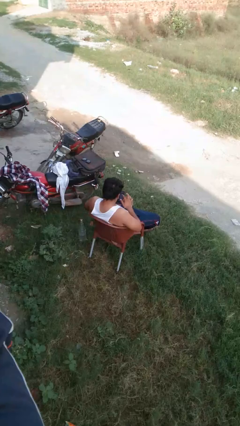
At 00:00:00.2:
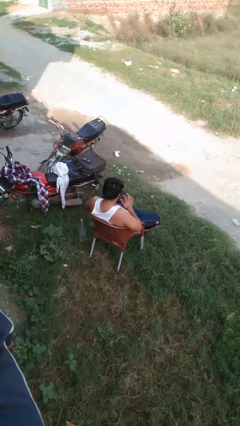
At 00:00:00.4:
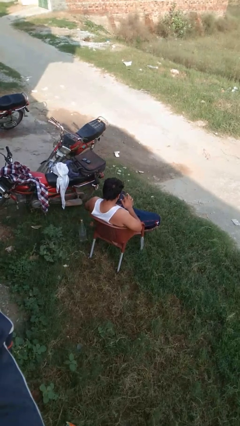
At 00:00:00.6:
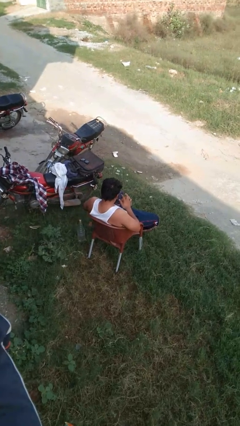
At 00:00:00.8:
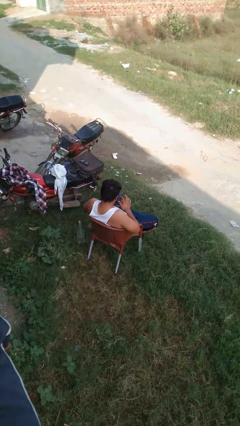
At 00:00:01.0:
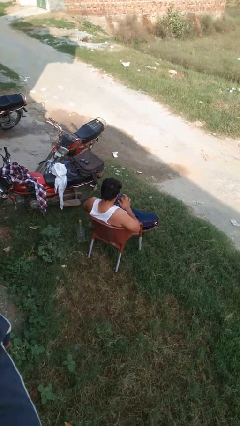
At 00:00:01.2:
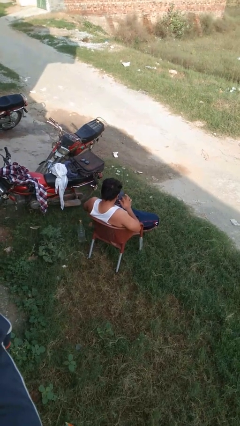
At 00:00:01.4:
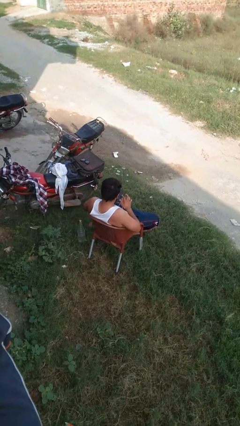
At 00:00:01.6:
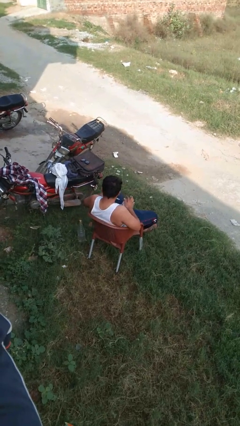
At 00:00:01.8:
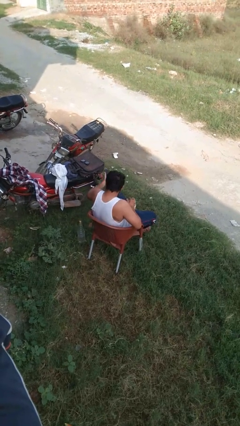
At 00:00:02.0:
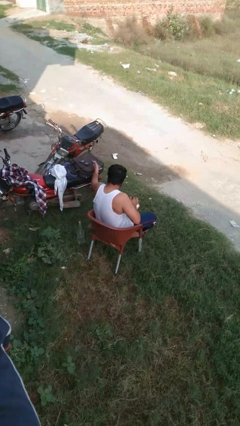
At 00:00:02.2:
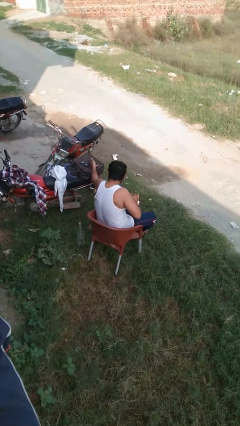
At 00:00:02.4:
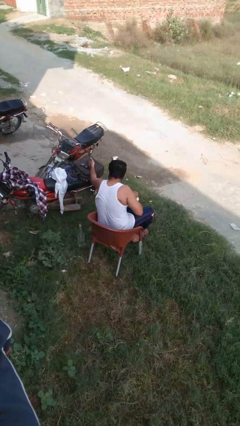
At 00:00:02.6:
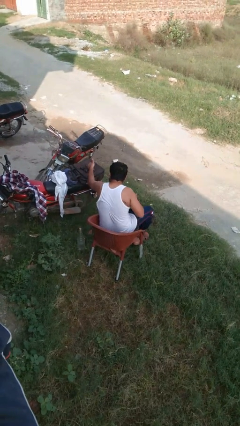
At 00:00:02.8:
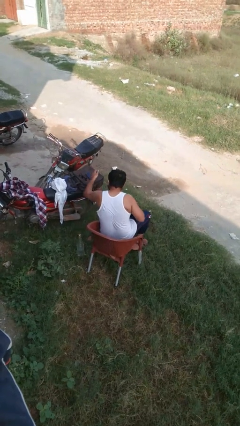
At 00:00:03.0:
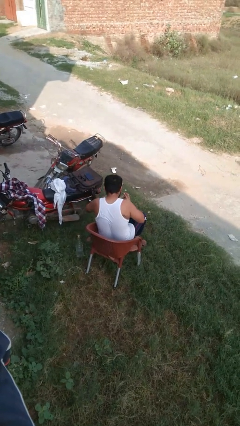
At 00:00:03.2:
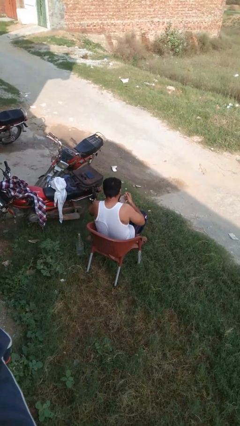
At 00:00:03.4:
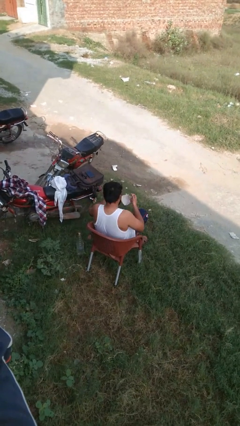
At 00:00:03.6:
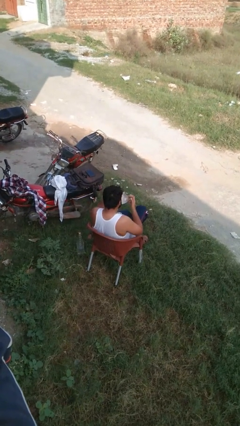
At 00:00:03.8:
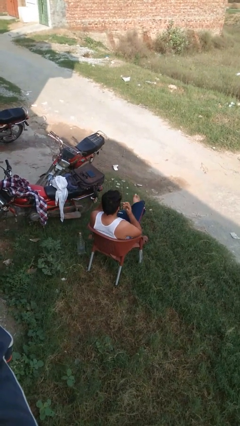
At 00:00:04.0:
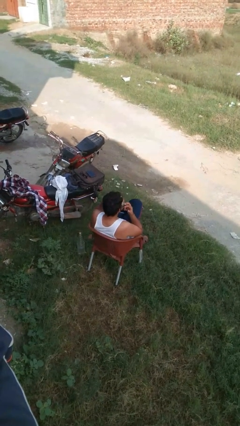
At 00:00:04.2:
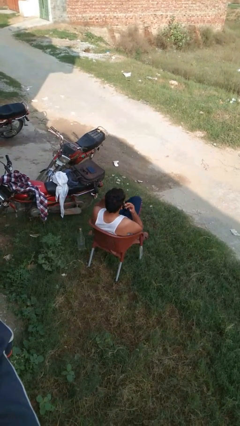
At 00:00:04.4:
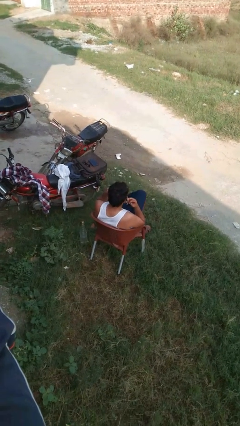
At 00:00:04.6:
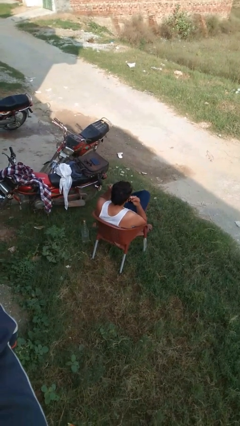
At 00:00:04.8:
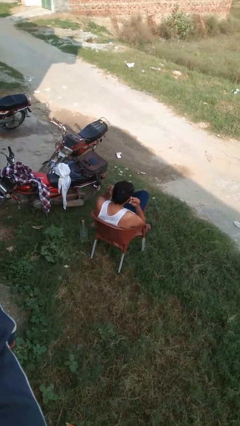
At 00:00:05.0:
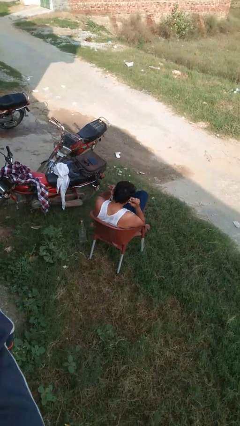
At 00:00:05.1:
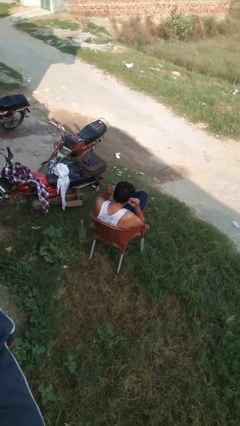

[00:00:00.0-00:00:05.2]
person puts on facemask

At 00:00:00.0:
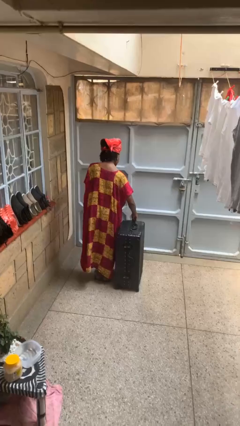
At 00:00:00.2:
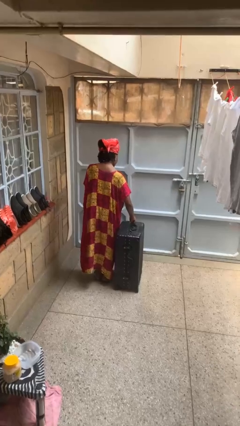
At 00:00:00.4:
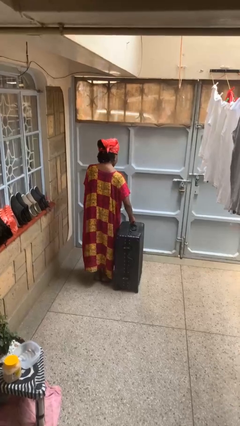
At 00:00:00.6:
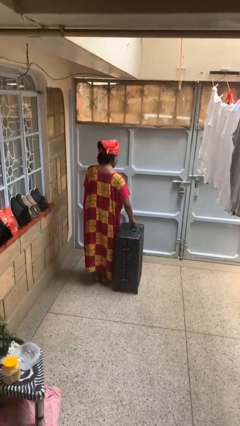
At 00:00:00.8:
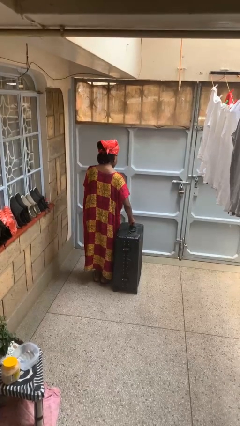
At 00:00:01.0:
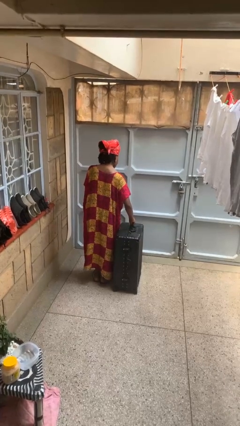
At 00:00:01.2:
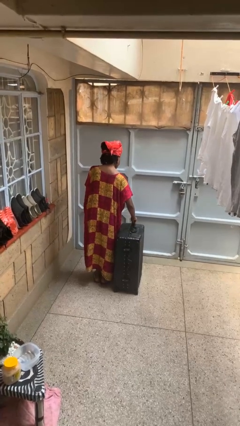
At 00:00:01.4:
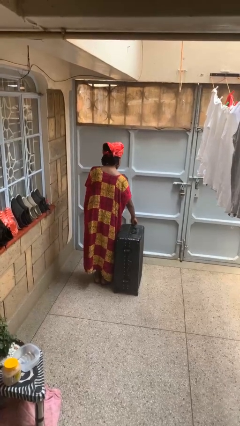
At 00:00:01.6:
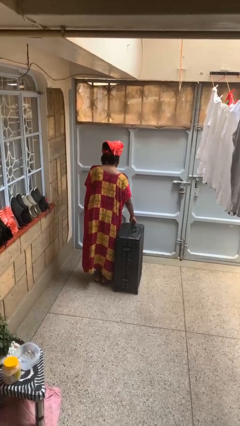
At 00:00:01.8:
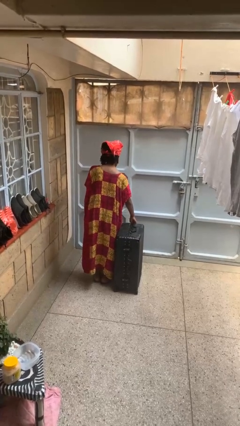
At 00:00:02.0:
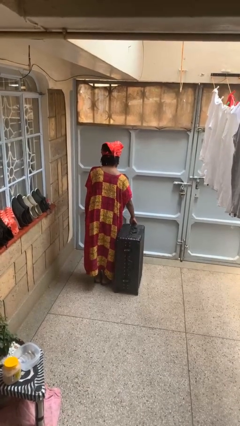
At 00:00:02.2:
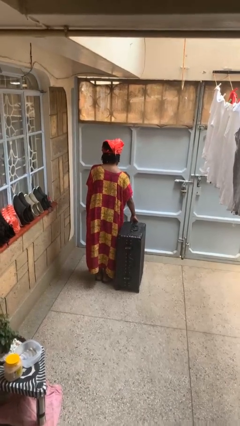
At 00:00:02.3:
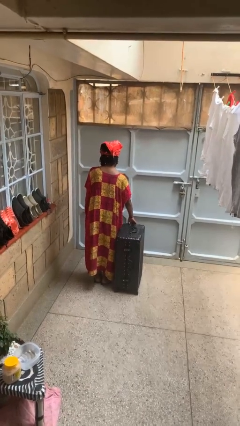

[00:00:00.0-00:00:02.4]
person closes suitcase

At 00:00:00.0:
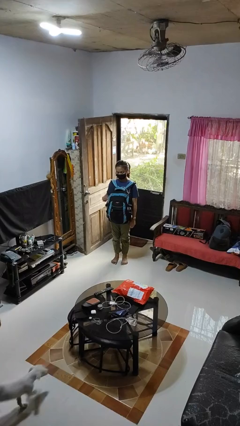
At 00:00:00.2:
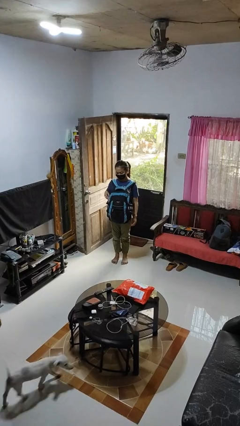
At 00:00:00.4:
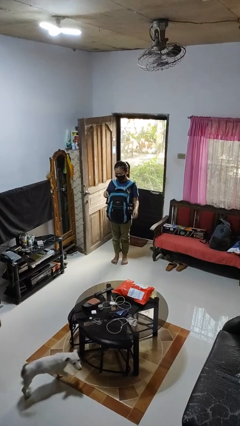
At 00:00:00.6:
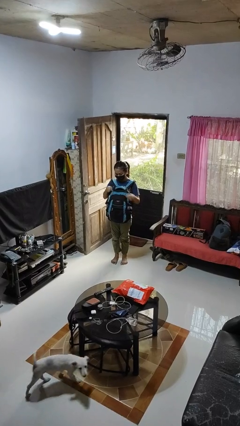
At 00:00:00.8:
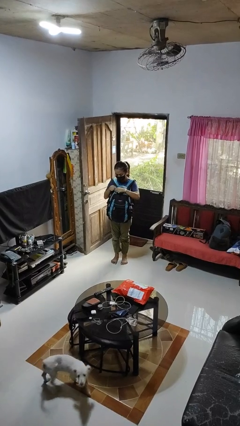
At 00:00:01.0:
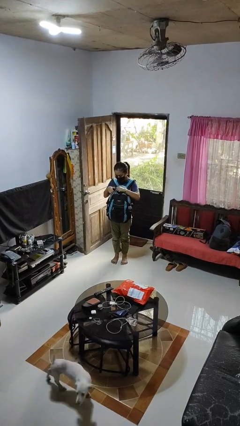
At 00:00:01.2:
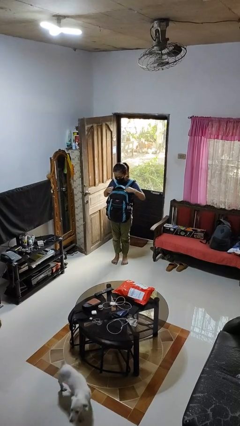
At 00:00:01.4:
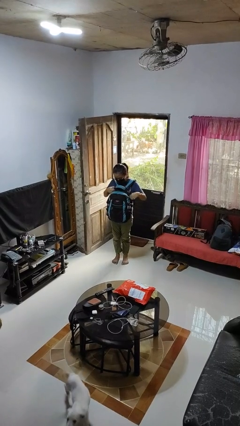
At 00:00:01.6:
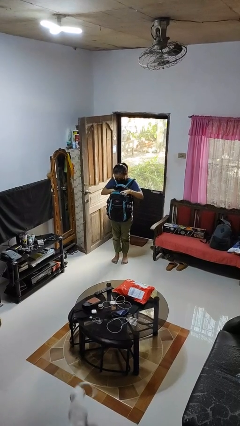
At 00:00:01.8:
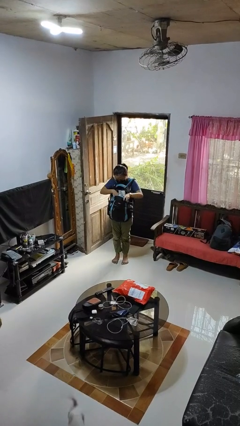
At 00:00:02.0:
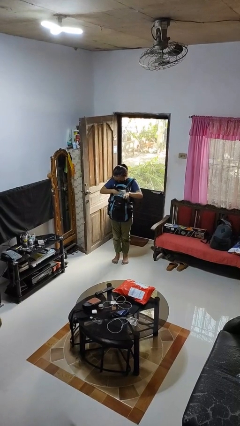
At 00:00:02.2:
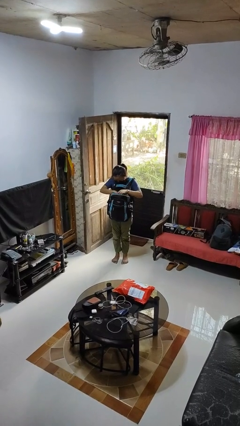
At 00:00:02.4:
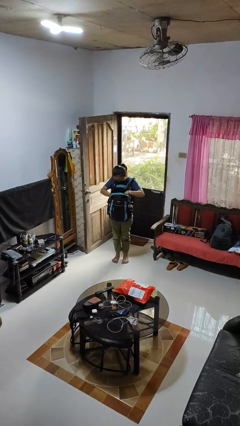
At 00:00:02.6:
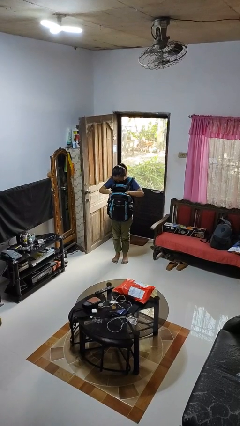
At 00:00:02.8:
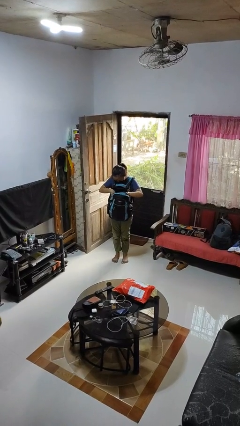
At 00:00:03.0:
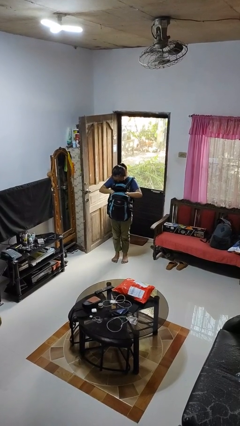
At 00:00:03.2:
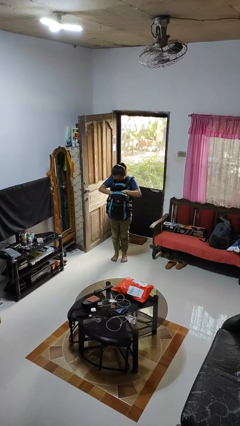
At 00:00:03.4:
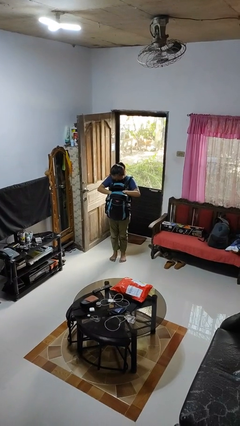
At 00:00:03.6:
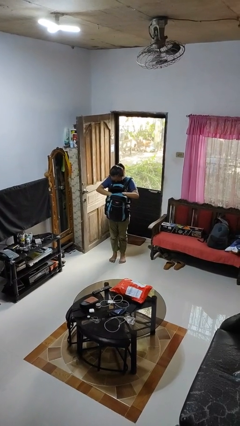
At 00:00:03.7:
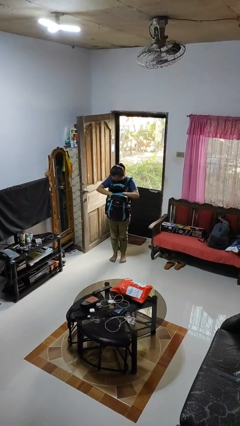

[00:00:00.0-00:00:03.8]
person searches in backpack

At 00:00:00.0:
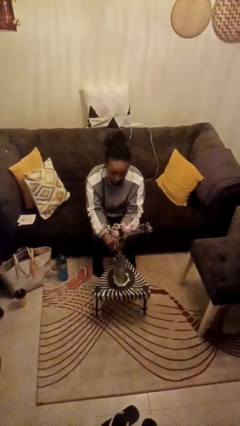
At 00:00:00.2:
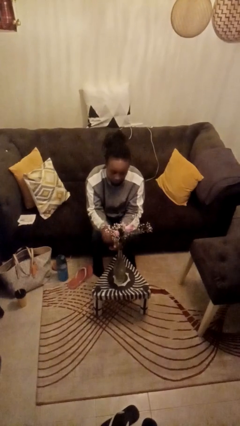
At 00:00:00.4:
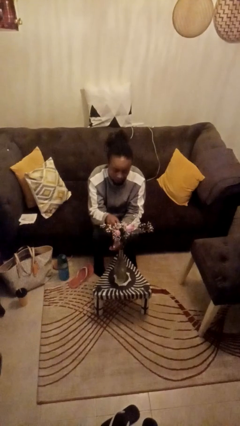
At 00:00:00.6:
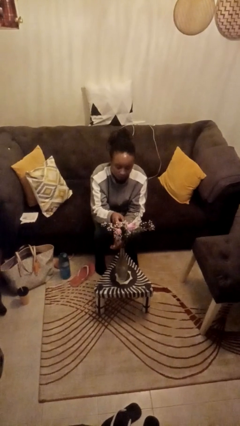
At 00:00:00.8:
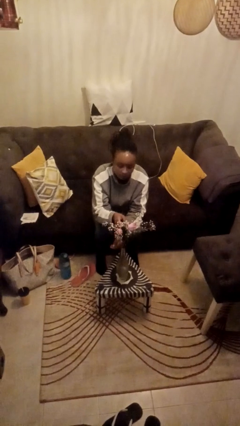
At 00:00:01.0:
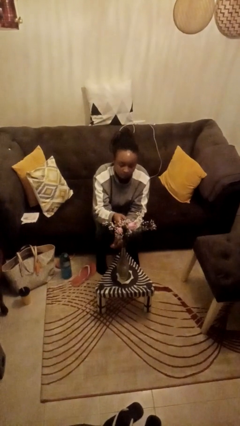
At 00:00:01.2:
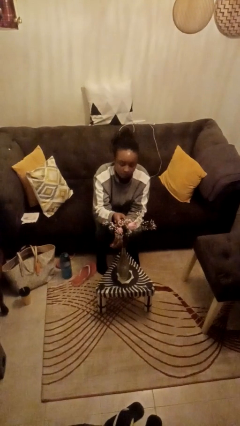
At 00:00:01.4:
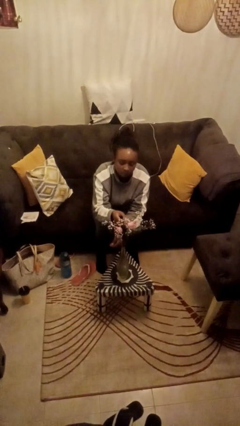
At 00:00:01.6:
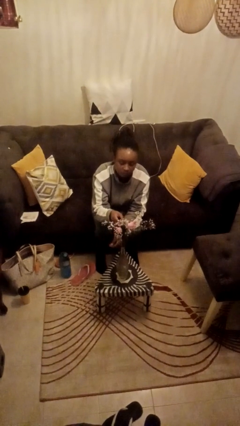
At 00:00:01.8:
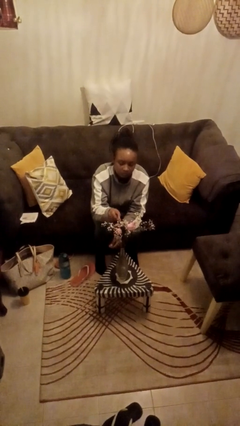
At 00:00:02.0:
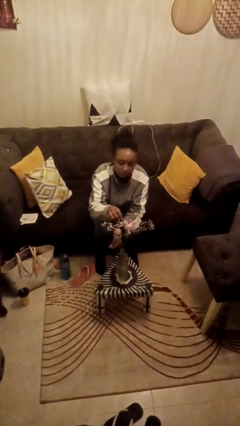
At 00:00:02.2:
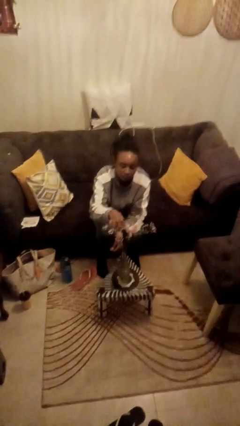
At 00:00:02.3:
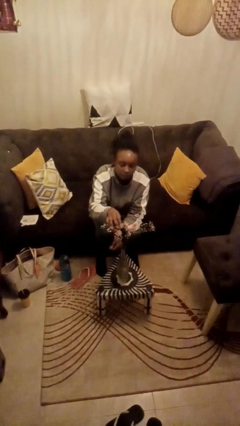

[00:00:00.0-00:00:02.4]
person arranges flowers in vase

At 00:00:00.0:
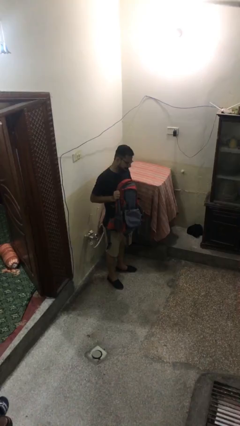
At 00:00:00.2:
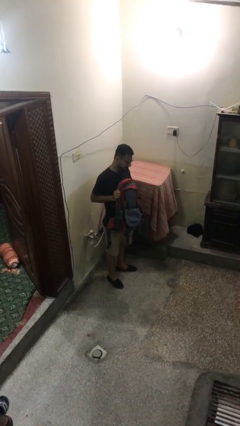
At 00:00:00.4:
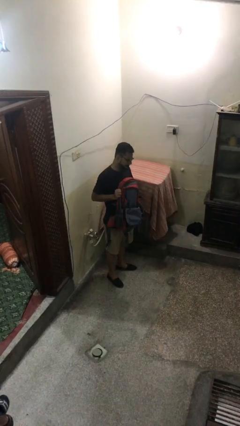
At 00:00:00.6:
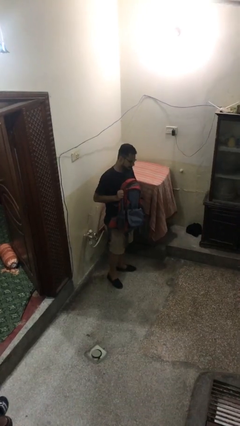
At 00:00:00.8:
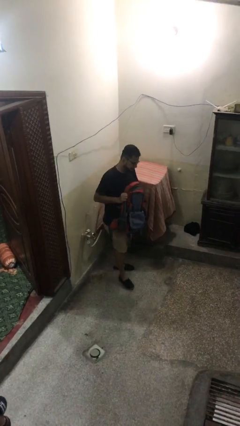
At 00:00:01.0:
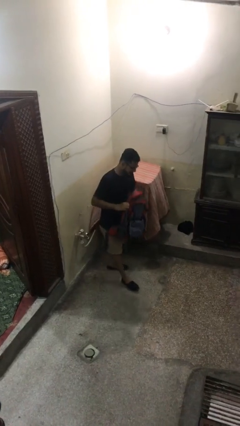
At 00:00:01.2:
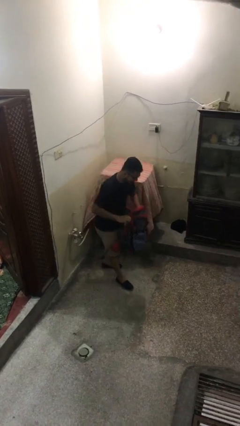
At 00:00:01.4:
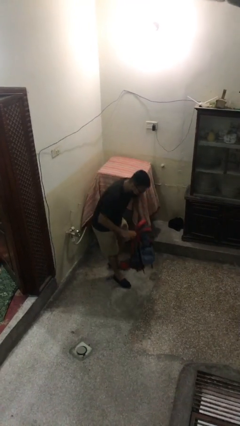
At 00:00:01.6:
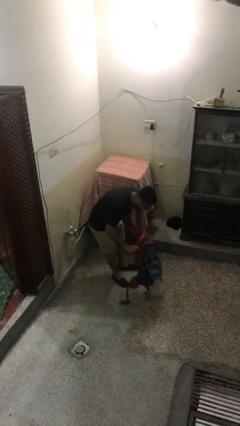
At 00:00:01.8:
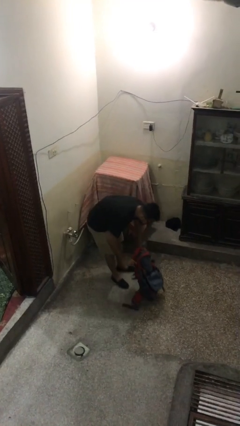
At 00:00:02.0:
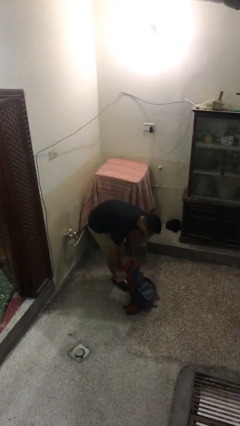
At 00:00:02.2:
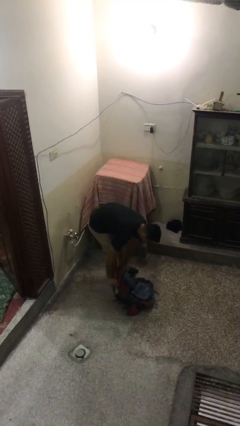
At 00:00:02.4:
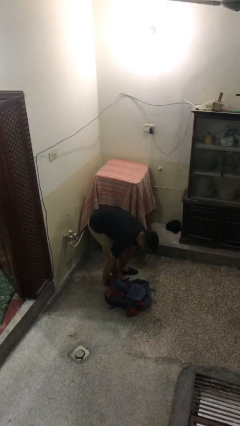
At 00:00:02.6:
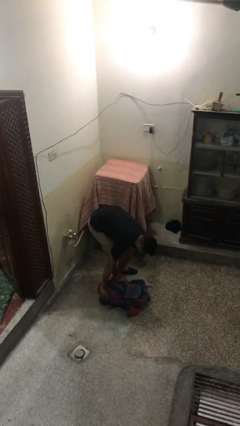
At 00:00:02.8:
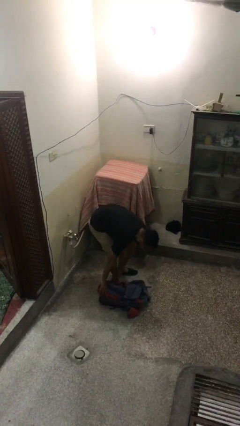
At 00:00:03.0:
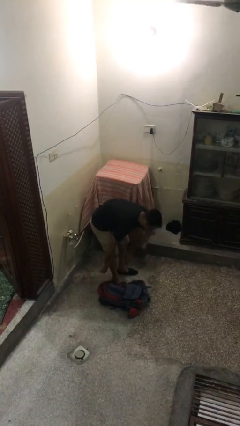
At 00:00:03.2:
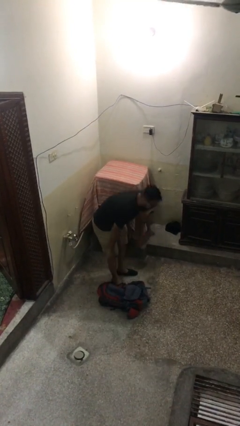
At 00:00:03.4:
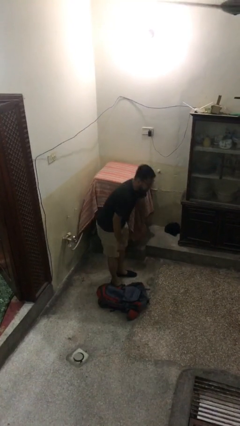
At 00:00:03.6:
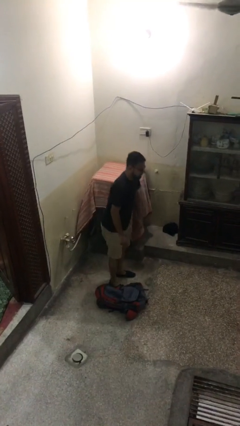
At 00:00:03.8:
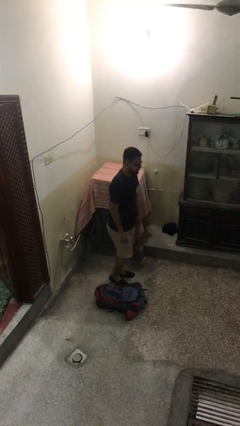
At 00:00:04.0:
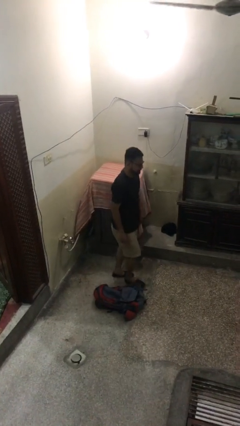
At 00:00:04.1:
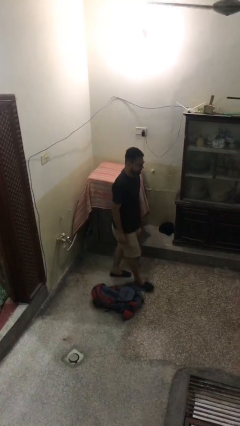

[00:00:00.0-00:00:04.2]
person puts down object on floor
